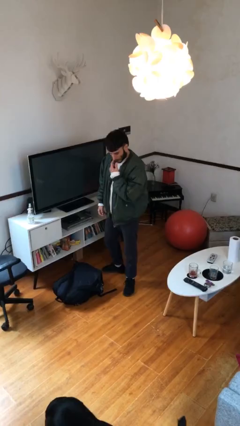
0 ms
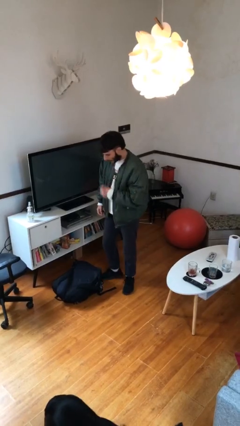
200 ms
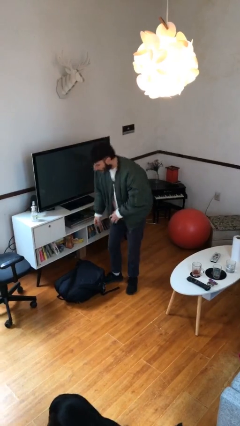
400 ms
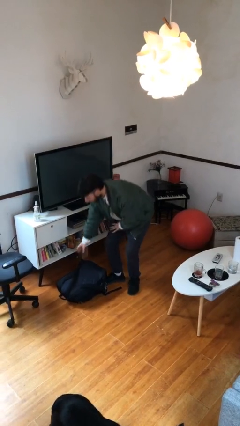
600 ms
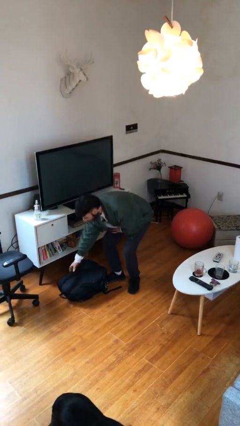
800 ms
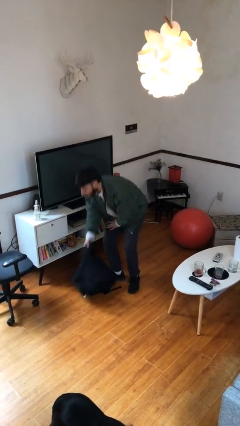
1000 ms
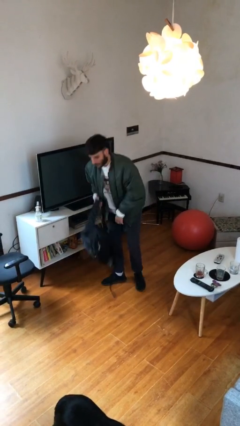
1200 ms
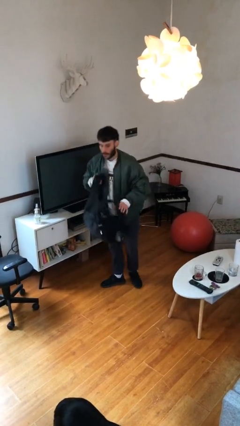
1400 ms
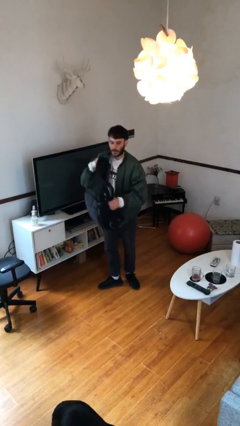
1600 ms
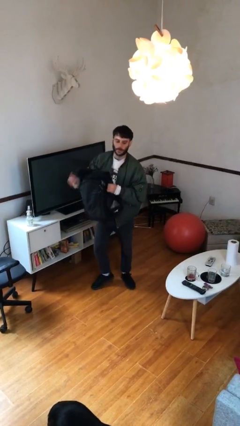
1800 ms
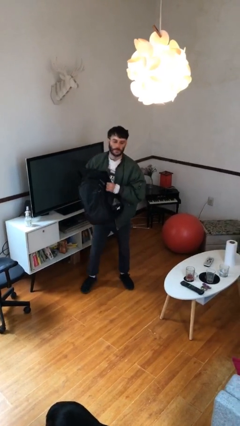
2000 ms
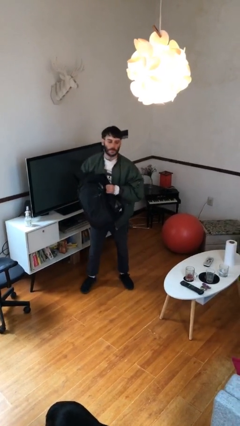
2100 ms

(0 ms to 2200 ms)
person picks up object from floor

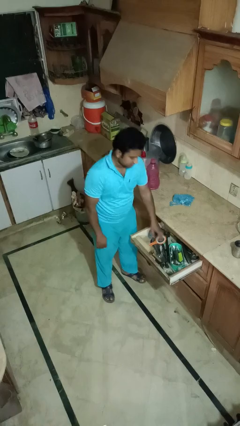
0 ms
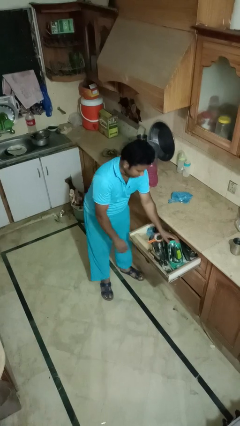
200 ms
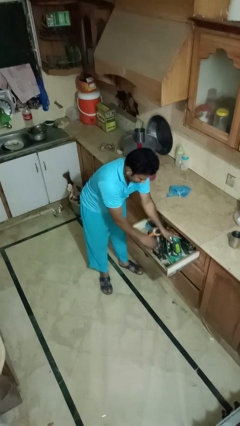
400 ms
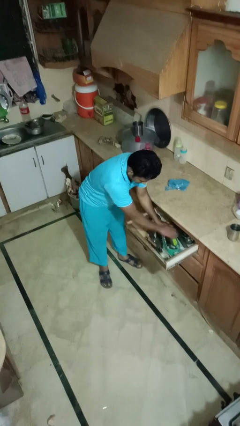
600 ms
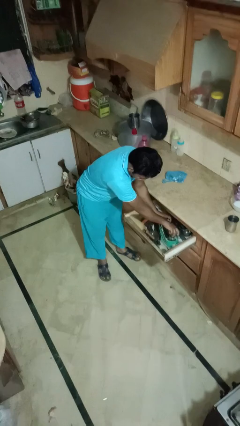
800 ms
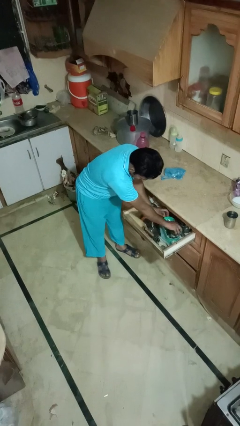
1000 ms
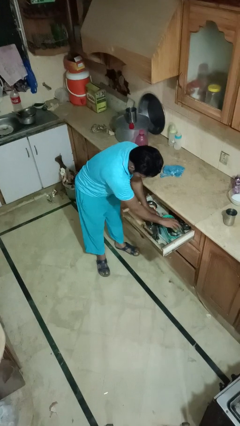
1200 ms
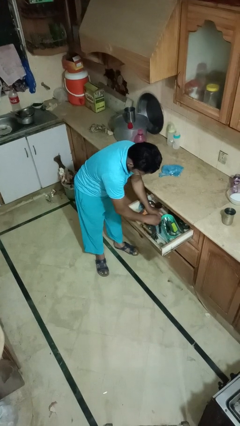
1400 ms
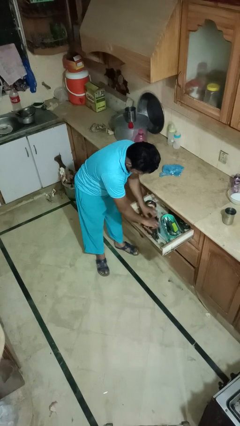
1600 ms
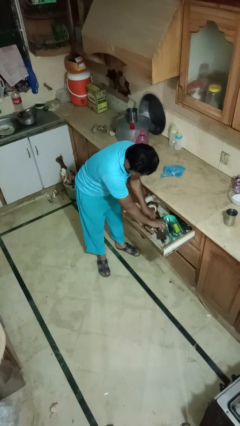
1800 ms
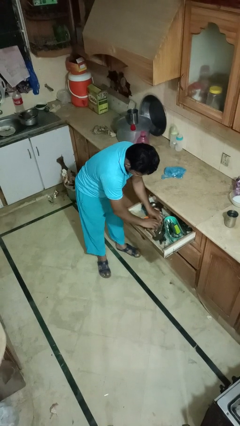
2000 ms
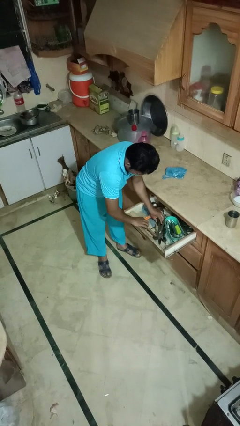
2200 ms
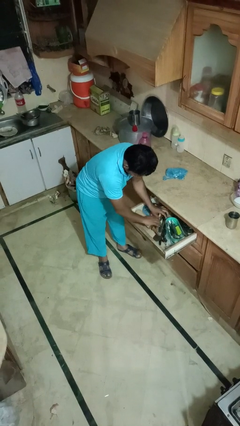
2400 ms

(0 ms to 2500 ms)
person searches in kitchen drawer

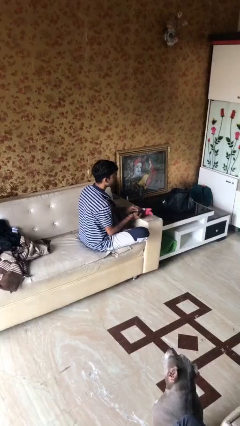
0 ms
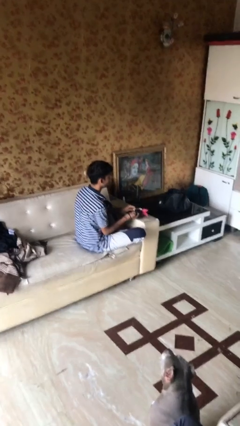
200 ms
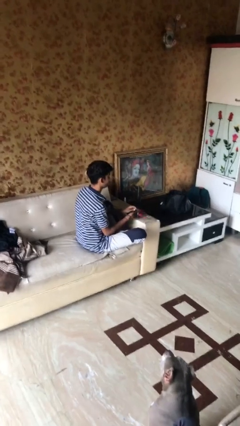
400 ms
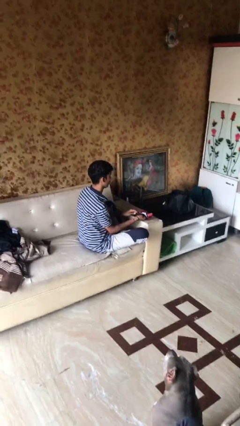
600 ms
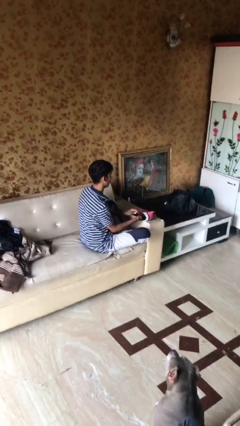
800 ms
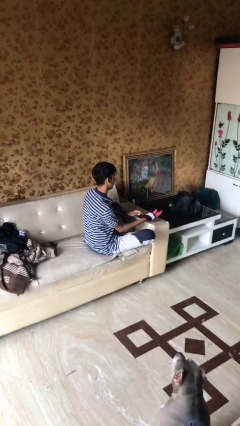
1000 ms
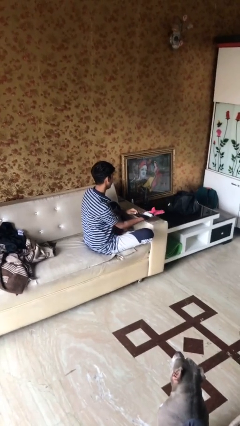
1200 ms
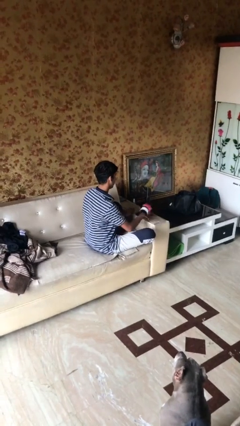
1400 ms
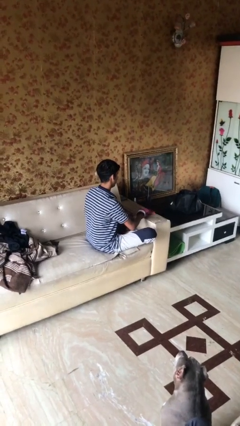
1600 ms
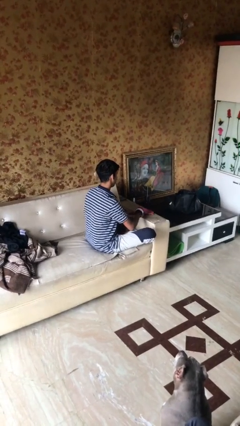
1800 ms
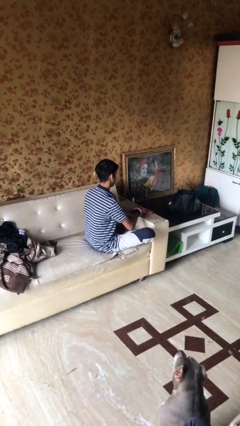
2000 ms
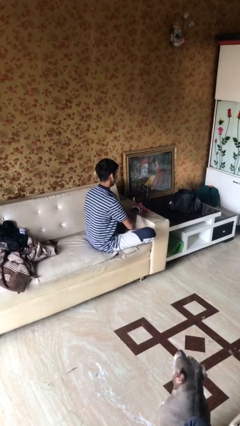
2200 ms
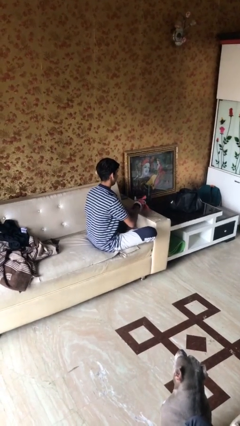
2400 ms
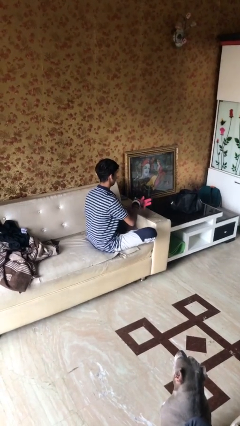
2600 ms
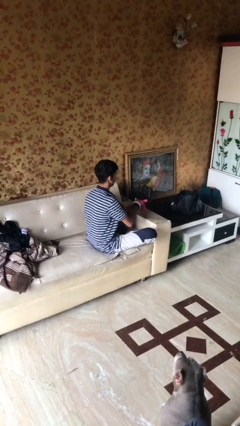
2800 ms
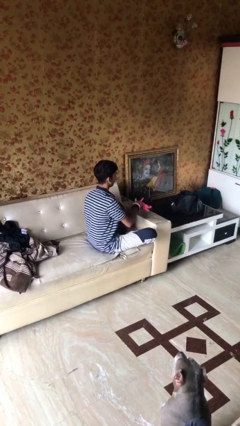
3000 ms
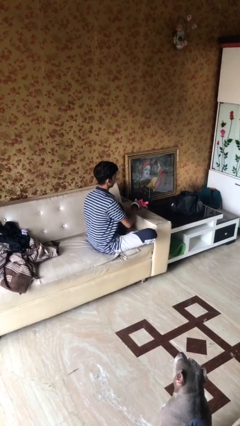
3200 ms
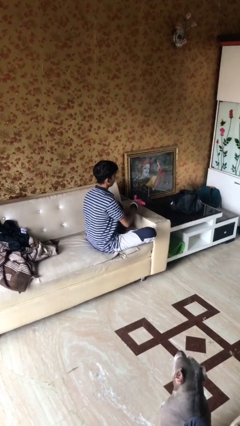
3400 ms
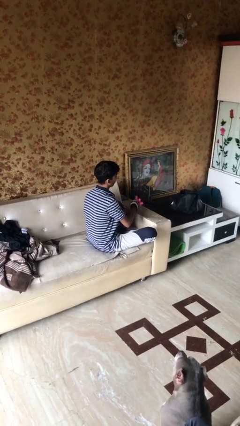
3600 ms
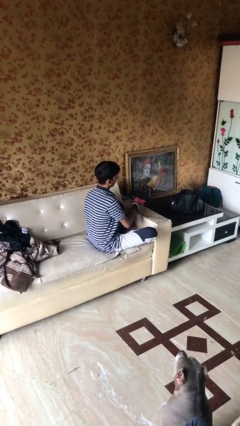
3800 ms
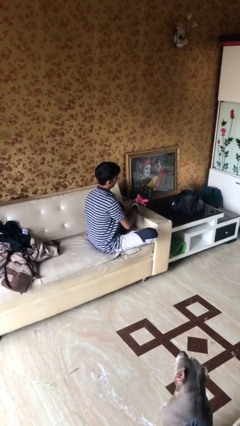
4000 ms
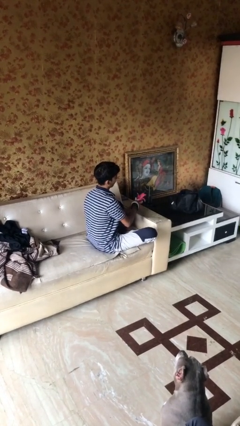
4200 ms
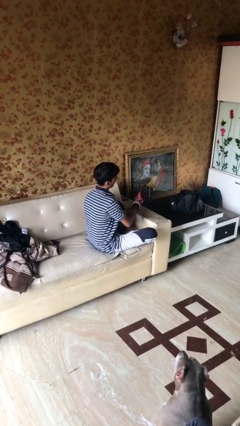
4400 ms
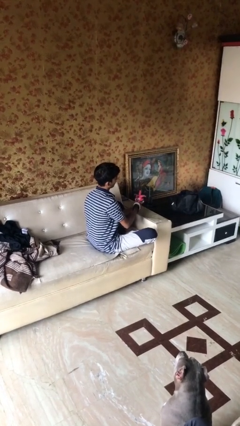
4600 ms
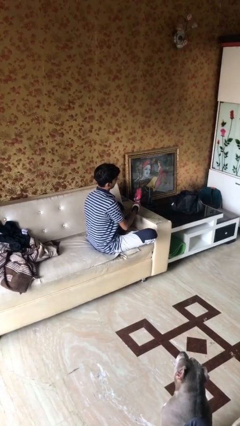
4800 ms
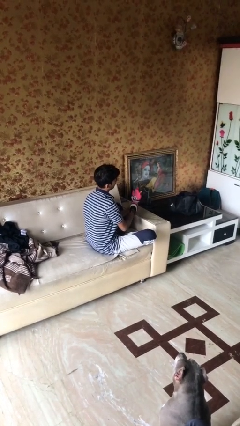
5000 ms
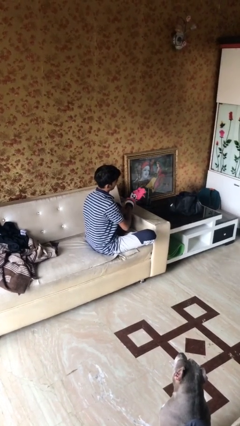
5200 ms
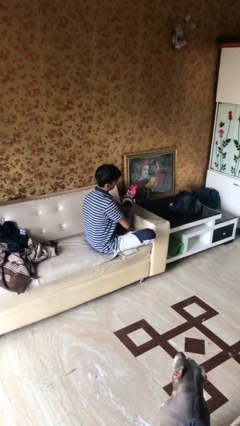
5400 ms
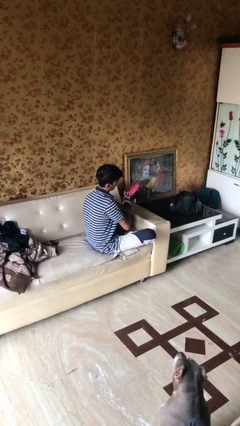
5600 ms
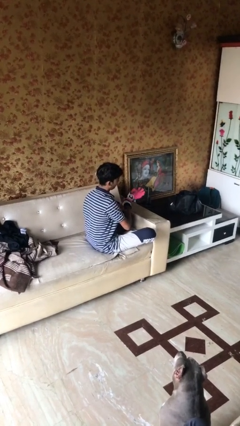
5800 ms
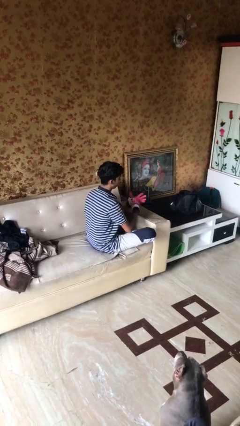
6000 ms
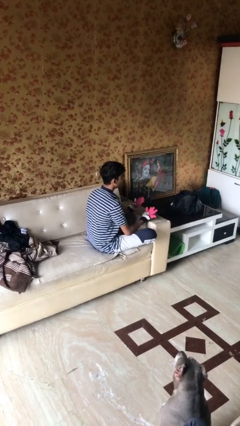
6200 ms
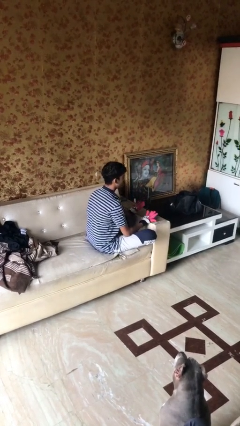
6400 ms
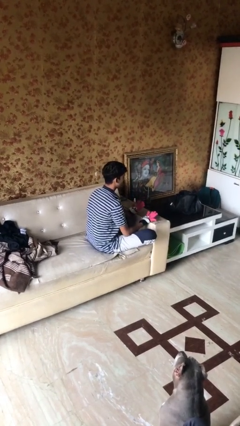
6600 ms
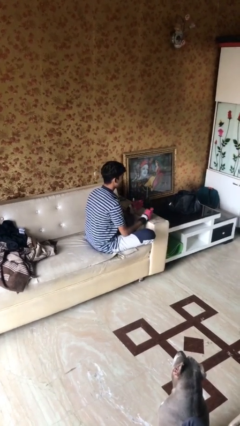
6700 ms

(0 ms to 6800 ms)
person puts on gloves

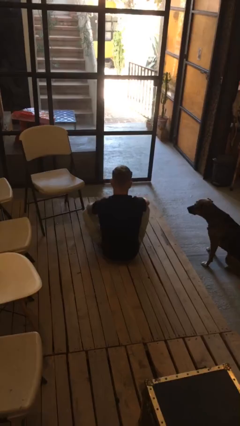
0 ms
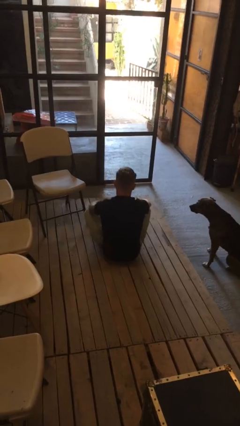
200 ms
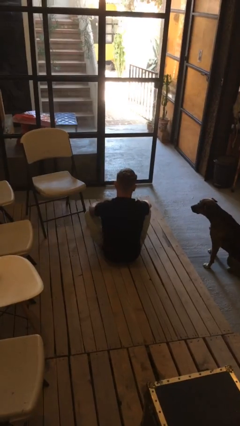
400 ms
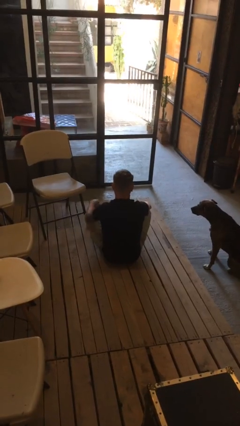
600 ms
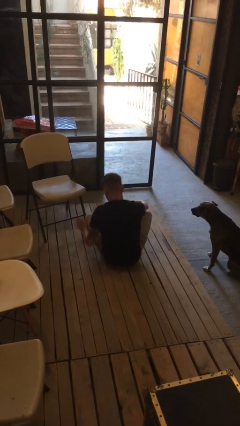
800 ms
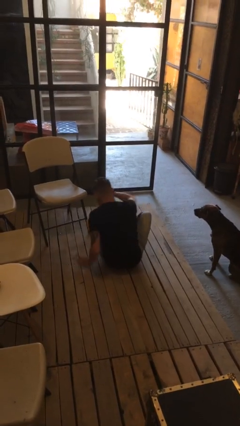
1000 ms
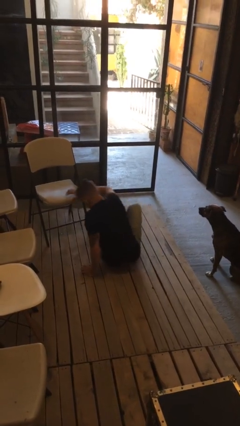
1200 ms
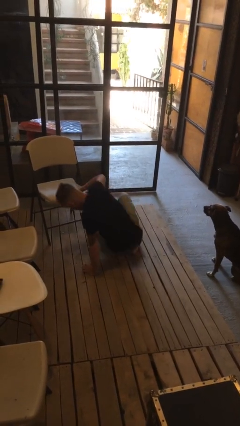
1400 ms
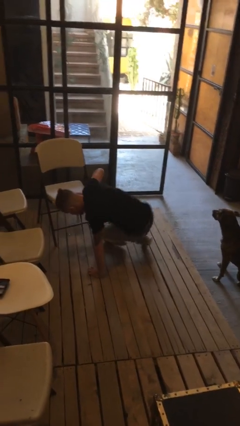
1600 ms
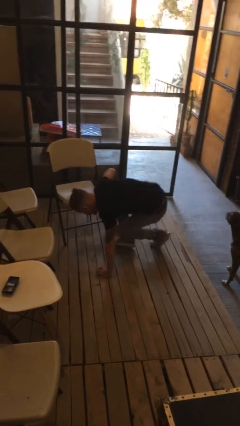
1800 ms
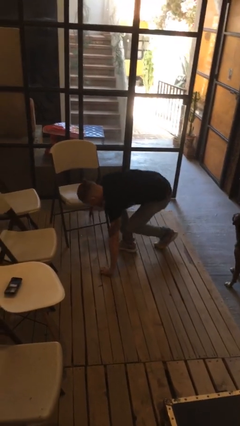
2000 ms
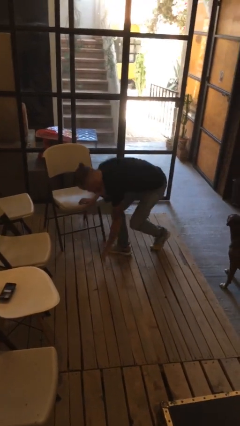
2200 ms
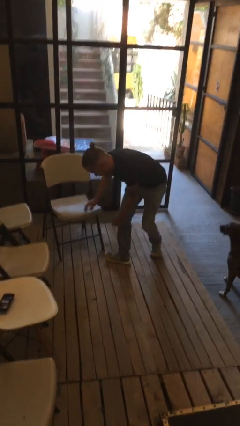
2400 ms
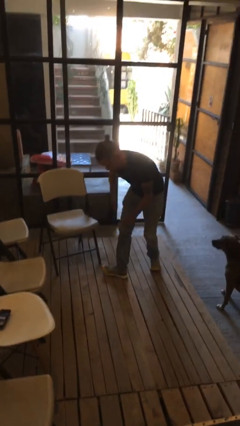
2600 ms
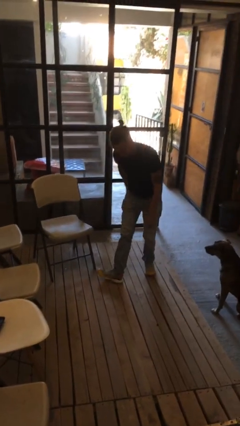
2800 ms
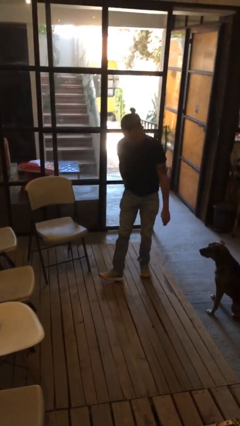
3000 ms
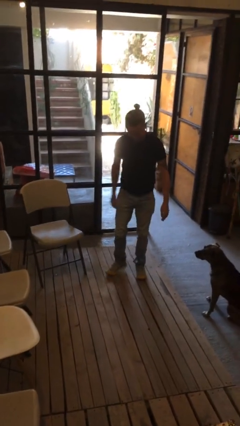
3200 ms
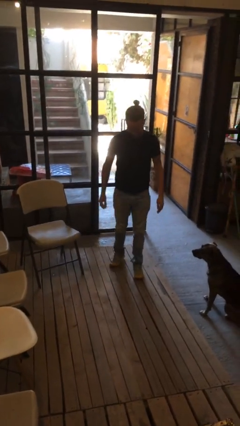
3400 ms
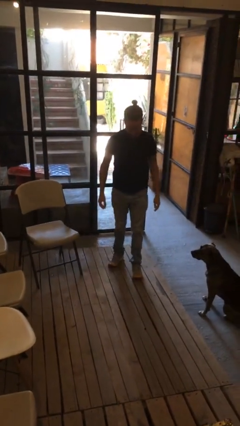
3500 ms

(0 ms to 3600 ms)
person stands up from floor

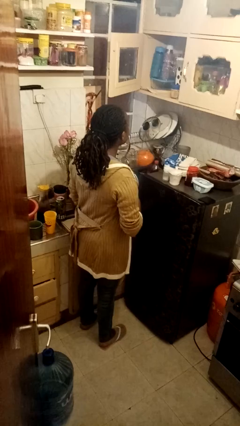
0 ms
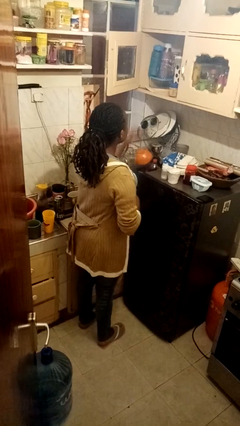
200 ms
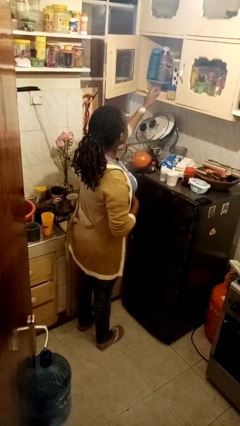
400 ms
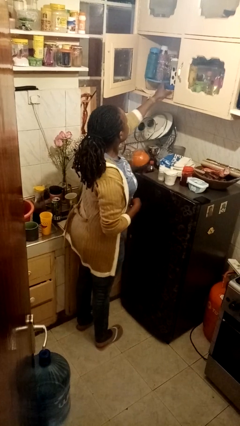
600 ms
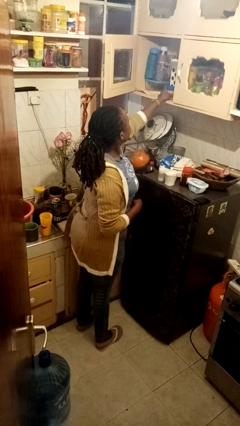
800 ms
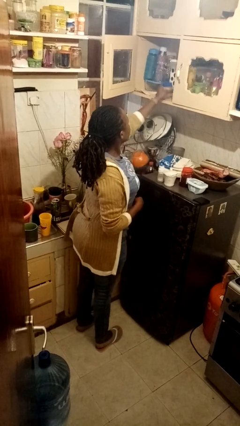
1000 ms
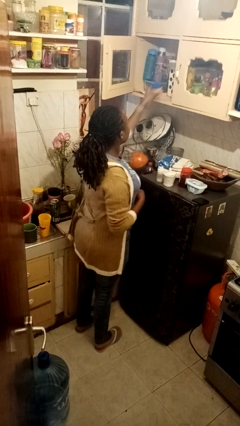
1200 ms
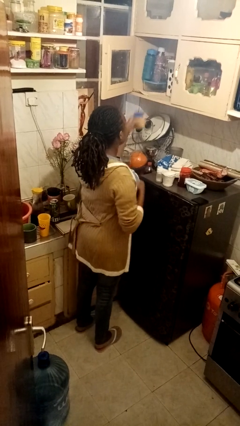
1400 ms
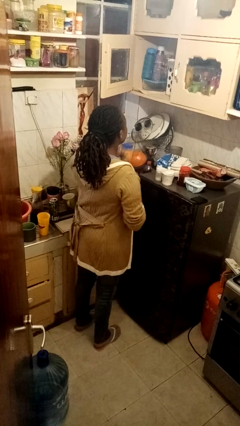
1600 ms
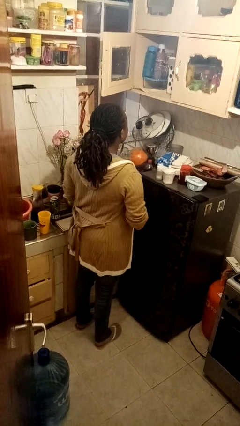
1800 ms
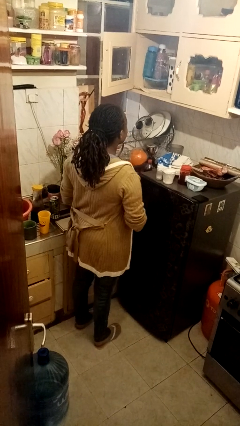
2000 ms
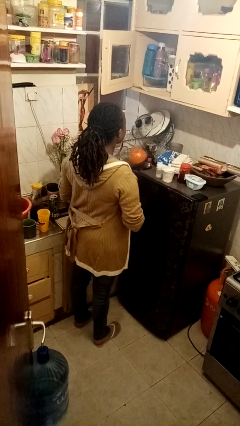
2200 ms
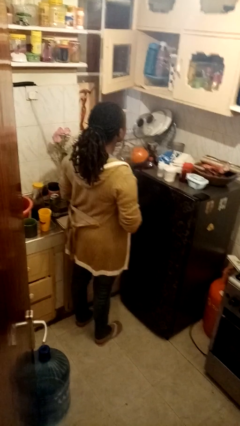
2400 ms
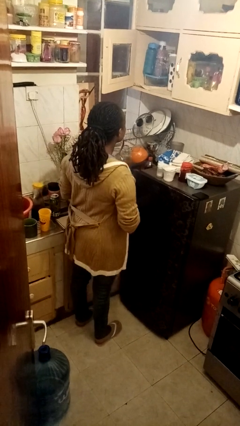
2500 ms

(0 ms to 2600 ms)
person picks up object from cabinet
